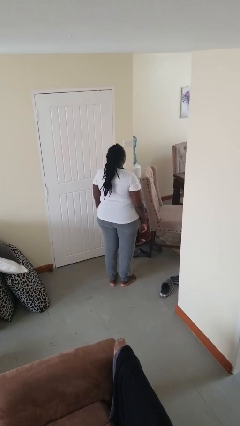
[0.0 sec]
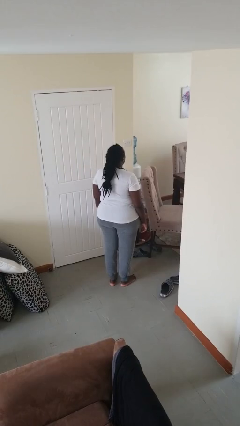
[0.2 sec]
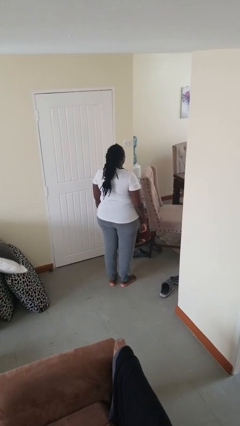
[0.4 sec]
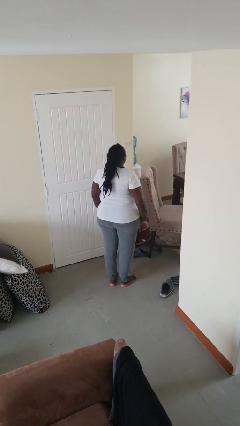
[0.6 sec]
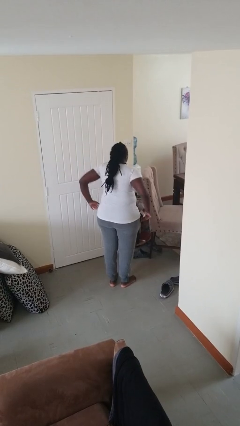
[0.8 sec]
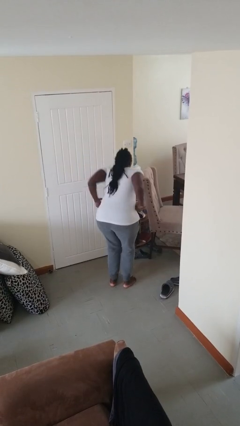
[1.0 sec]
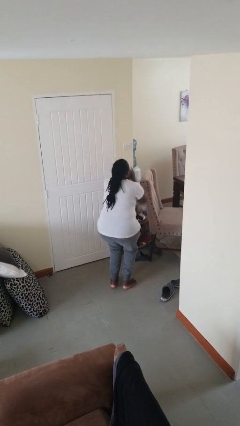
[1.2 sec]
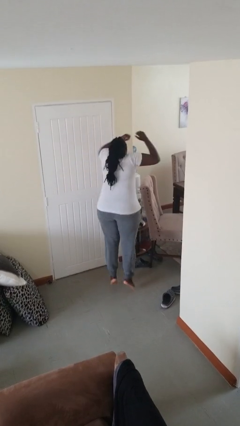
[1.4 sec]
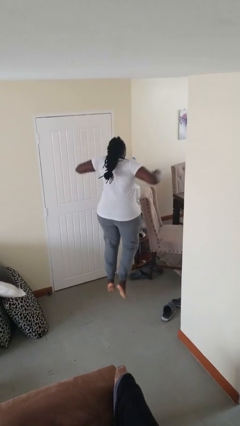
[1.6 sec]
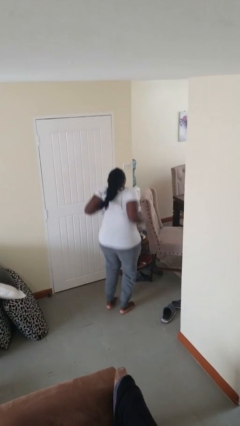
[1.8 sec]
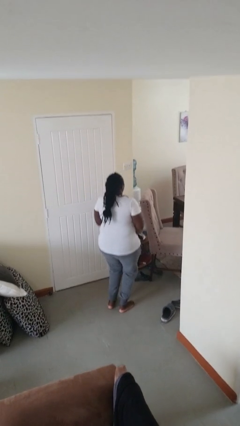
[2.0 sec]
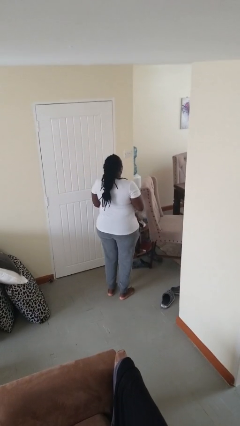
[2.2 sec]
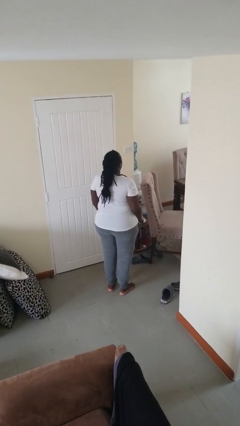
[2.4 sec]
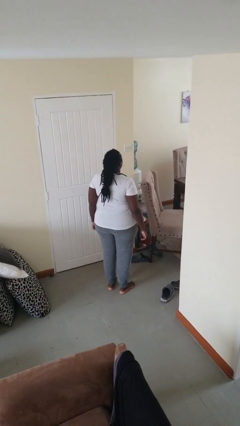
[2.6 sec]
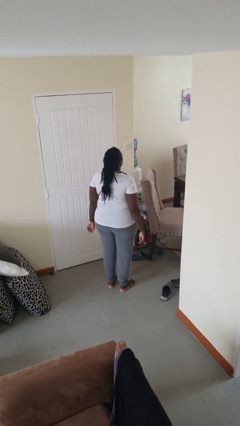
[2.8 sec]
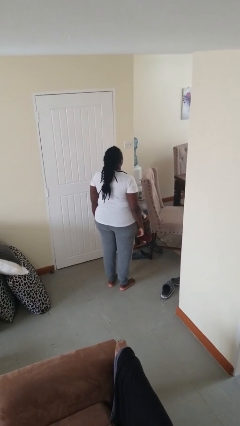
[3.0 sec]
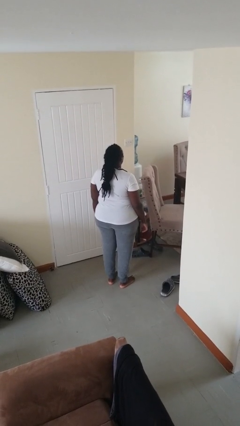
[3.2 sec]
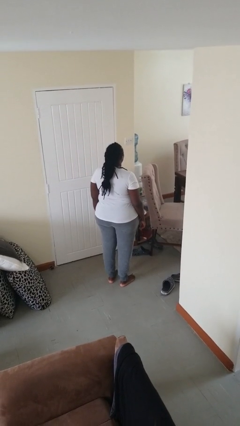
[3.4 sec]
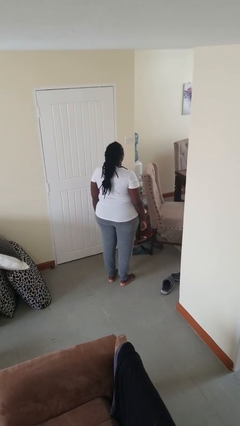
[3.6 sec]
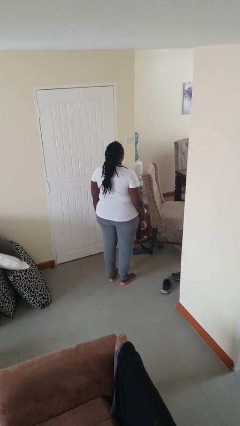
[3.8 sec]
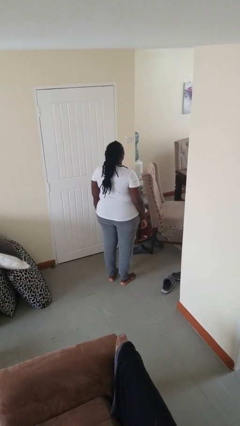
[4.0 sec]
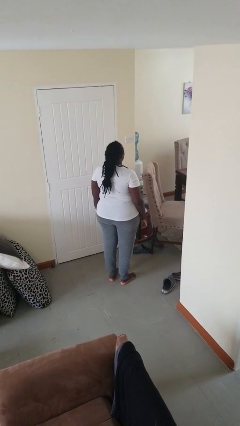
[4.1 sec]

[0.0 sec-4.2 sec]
person jumps

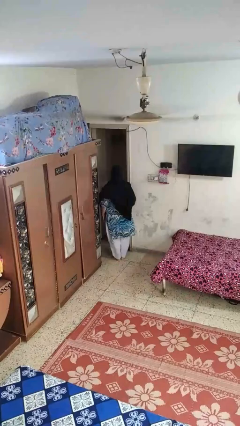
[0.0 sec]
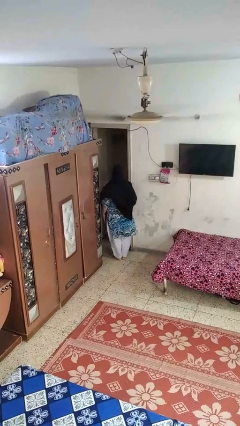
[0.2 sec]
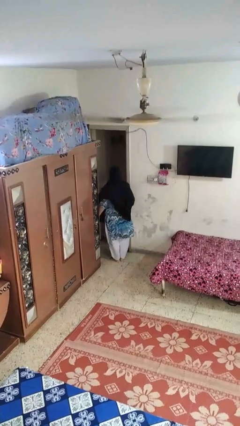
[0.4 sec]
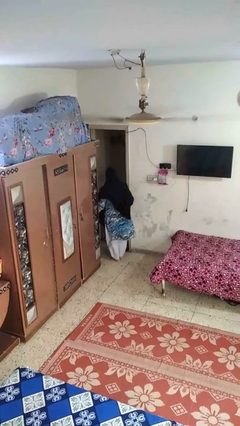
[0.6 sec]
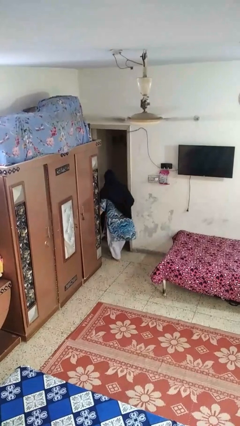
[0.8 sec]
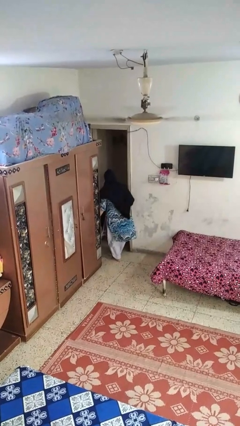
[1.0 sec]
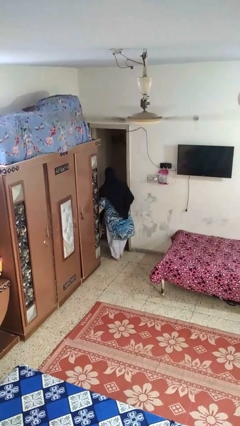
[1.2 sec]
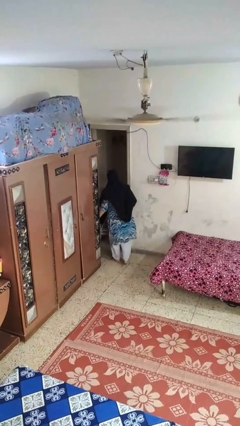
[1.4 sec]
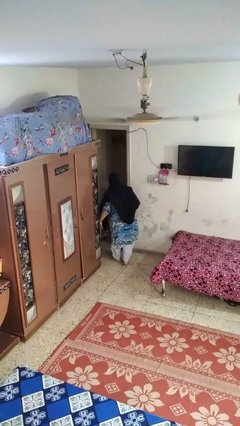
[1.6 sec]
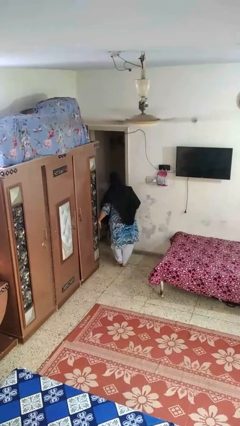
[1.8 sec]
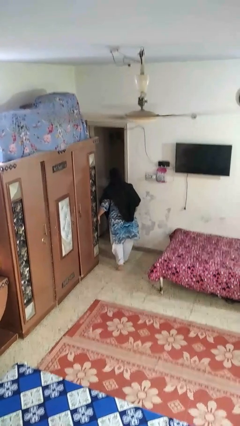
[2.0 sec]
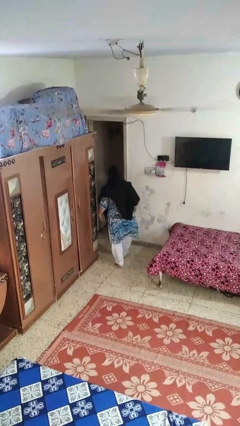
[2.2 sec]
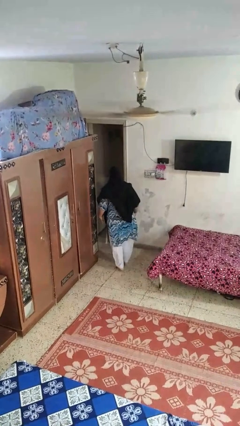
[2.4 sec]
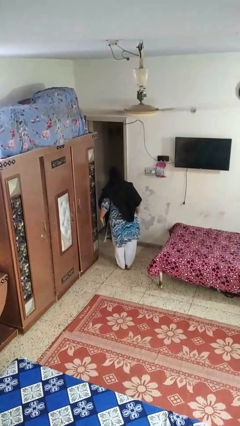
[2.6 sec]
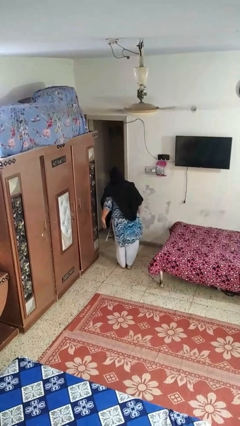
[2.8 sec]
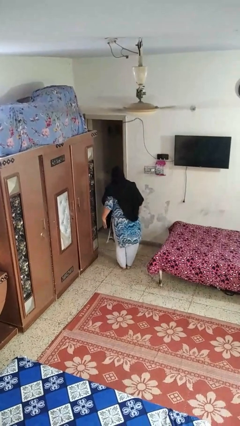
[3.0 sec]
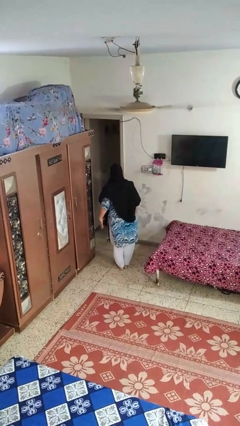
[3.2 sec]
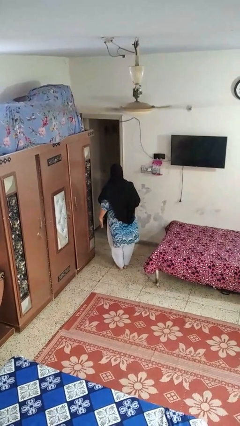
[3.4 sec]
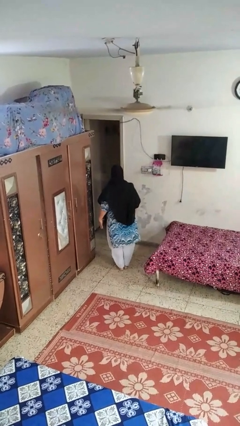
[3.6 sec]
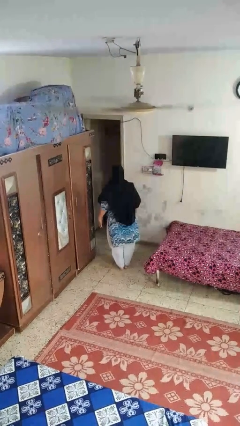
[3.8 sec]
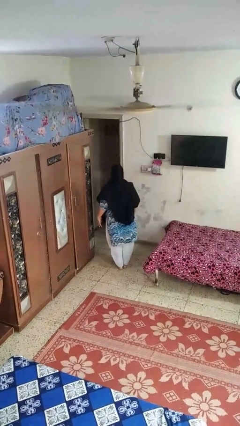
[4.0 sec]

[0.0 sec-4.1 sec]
person walks tiptoe

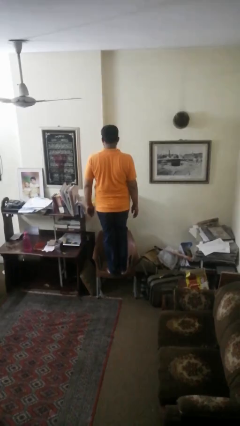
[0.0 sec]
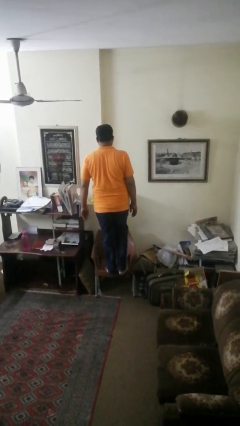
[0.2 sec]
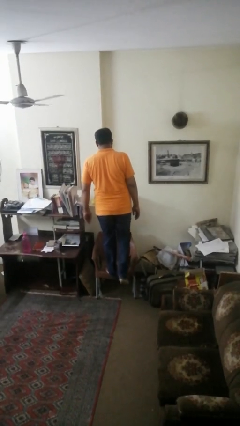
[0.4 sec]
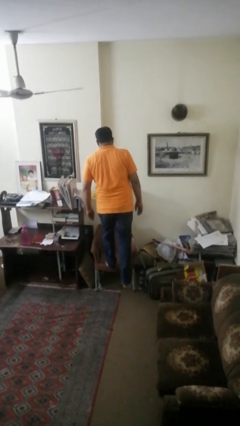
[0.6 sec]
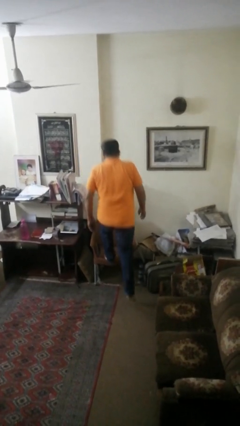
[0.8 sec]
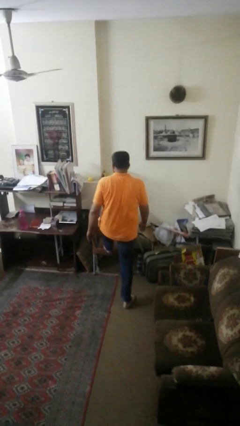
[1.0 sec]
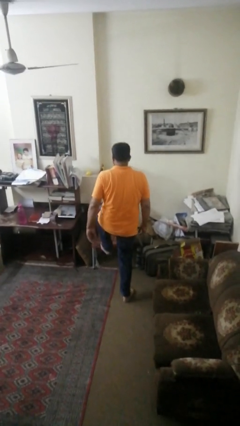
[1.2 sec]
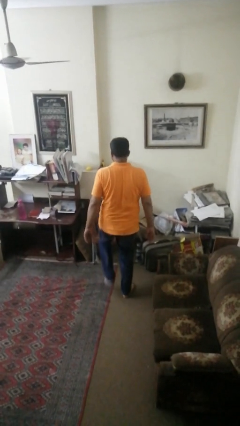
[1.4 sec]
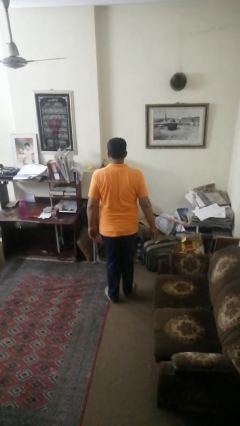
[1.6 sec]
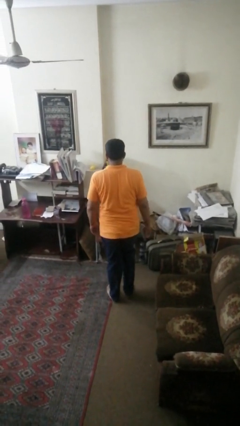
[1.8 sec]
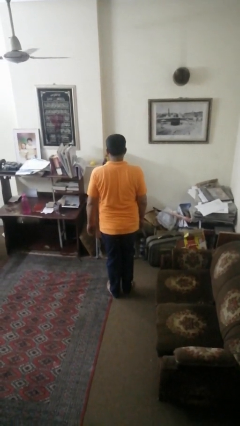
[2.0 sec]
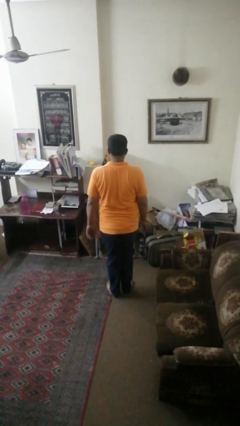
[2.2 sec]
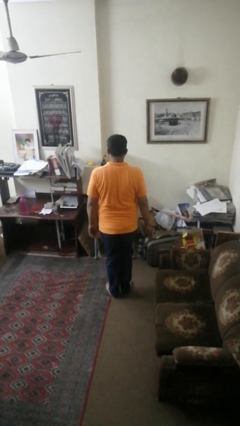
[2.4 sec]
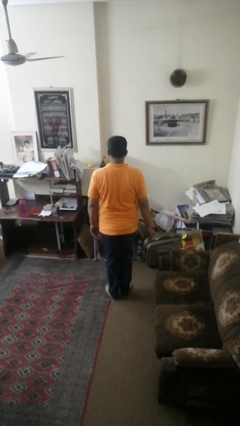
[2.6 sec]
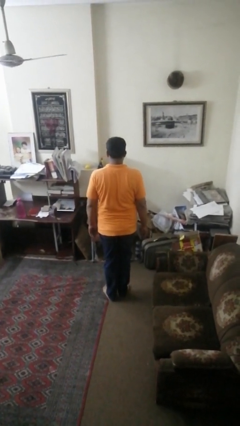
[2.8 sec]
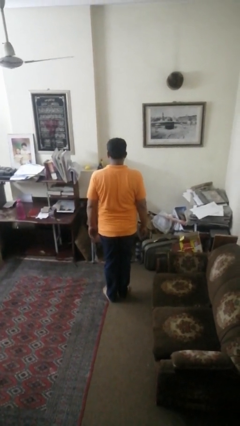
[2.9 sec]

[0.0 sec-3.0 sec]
person climbs off chair

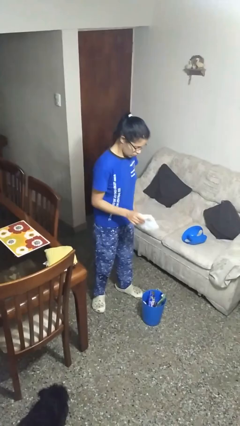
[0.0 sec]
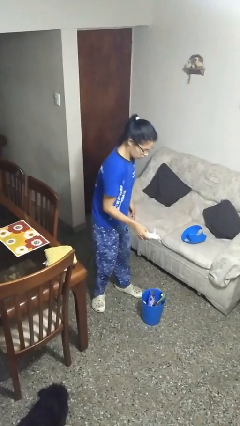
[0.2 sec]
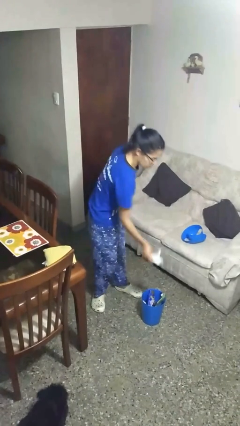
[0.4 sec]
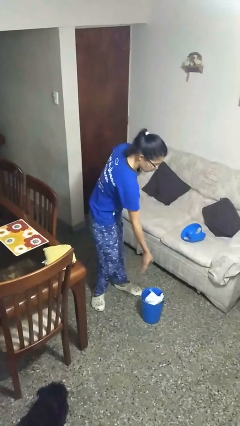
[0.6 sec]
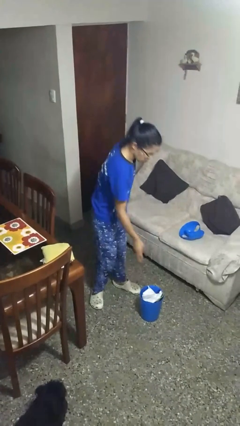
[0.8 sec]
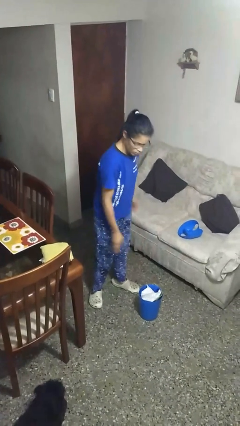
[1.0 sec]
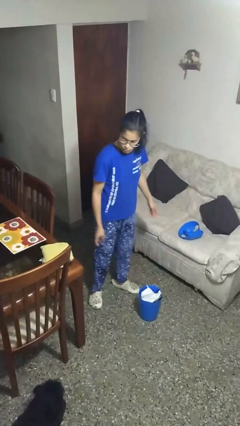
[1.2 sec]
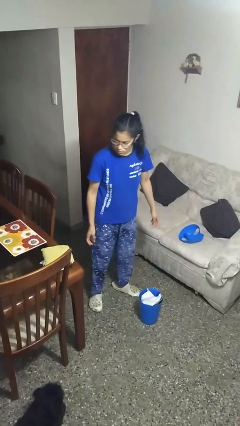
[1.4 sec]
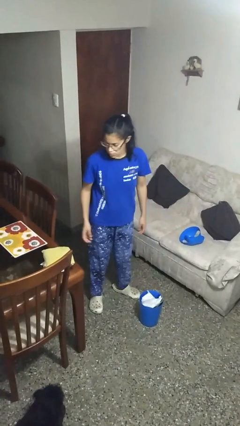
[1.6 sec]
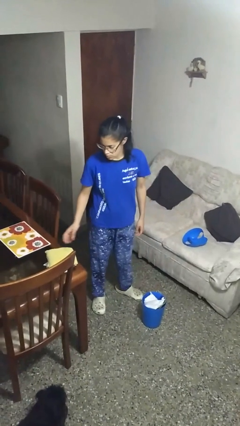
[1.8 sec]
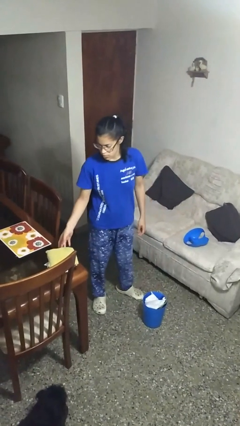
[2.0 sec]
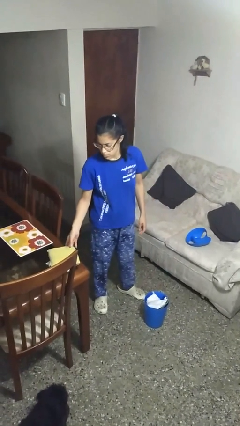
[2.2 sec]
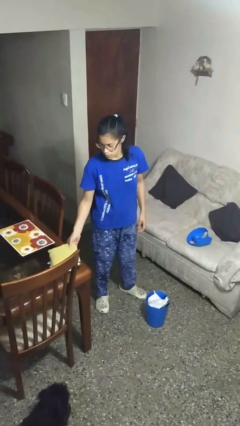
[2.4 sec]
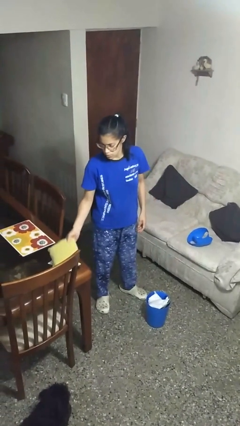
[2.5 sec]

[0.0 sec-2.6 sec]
person discards trash

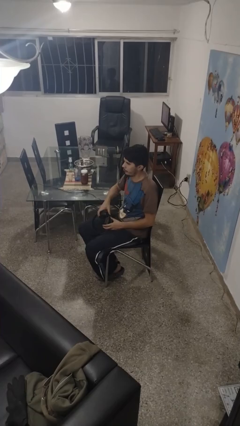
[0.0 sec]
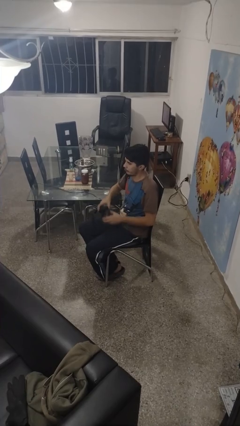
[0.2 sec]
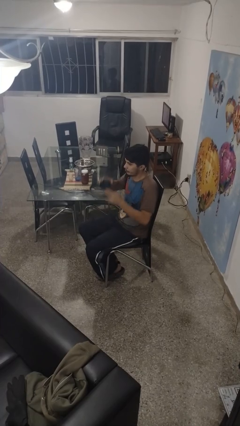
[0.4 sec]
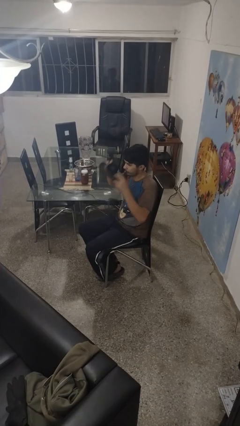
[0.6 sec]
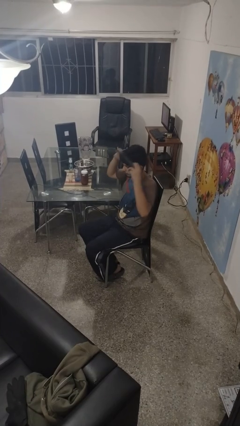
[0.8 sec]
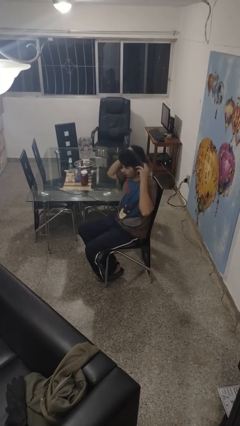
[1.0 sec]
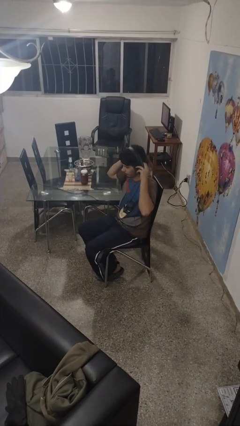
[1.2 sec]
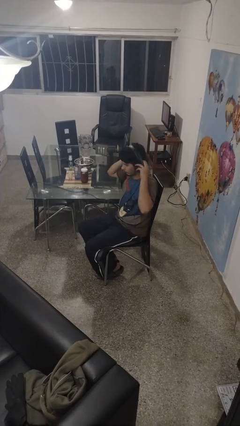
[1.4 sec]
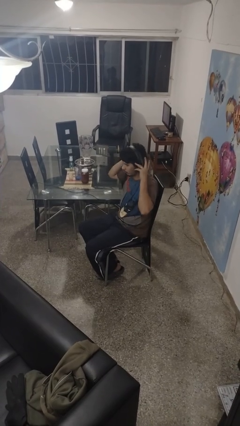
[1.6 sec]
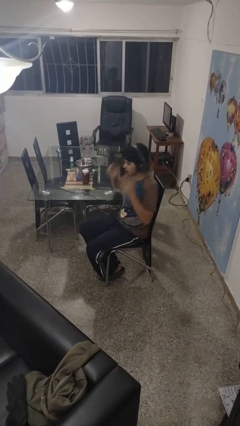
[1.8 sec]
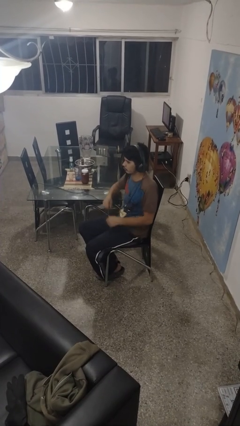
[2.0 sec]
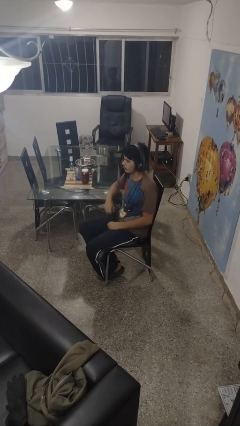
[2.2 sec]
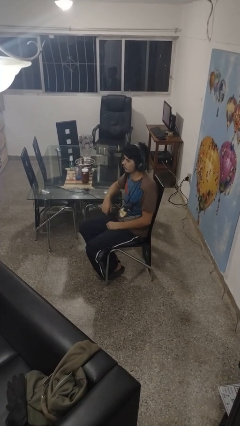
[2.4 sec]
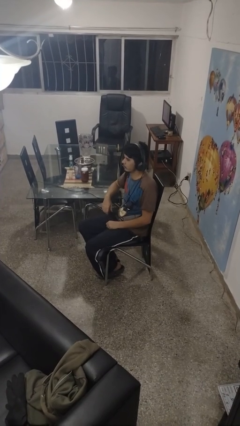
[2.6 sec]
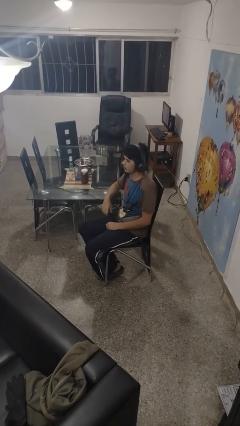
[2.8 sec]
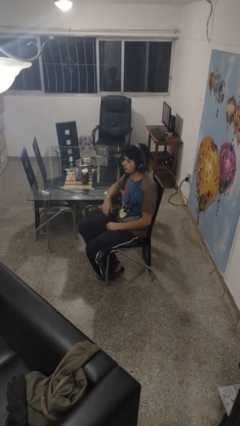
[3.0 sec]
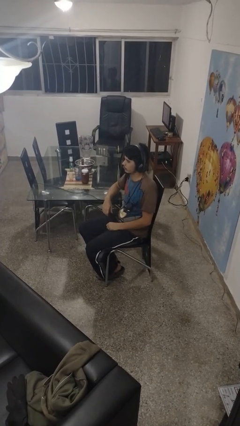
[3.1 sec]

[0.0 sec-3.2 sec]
person puts on headphones

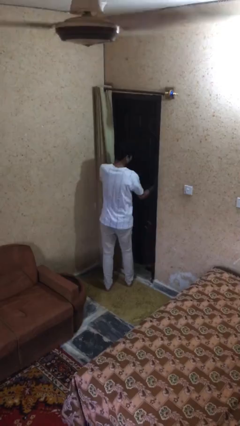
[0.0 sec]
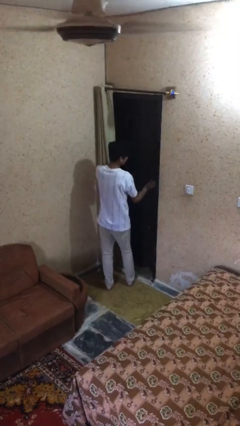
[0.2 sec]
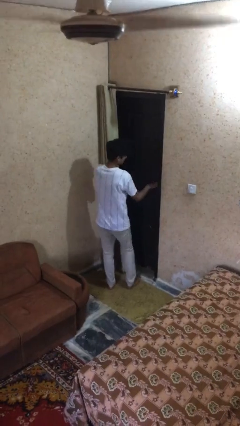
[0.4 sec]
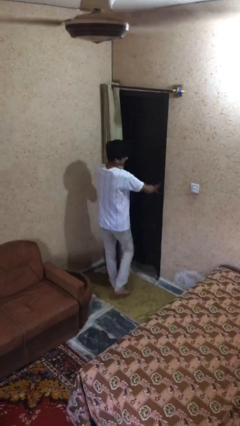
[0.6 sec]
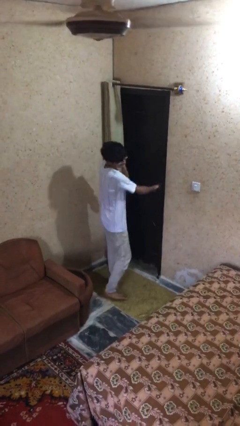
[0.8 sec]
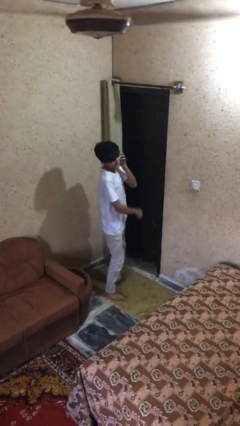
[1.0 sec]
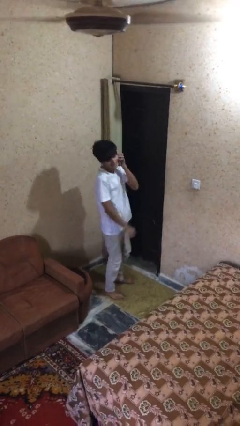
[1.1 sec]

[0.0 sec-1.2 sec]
person closes facility door
